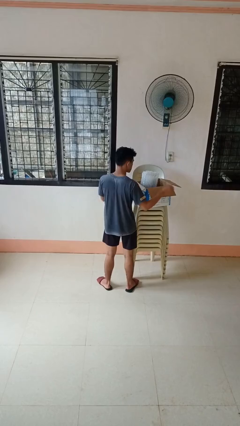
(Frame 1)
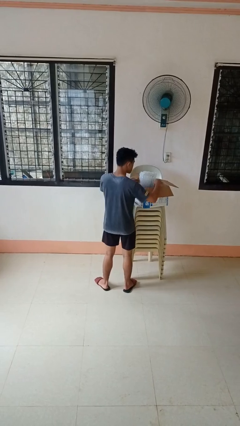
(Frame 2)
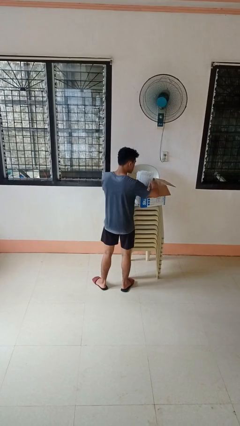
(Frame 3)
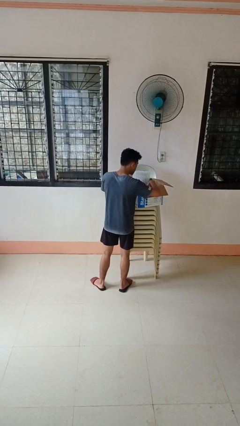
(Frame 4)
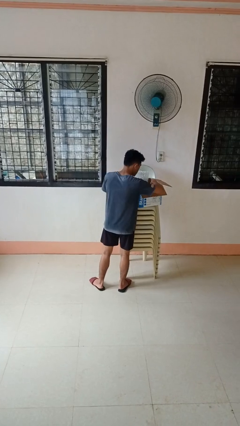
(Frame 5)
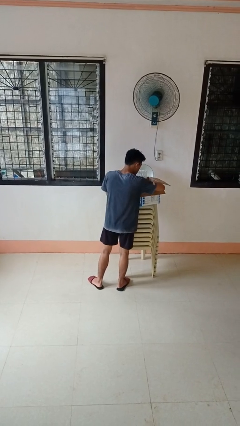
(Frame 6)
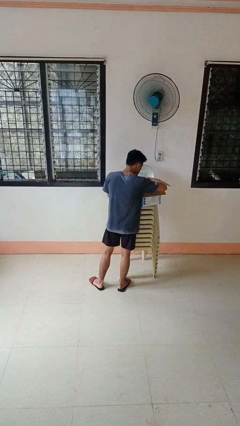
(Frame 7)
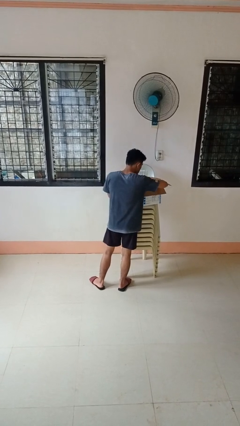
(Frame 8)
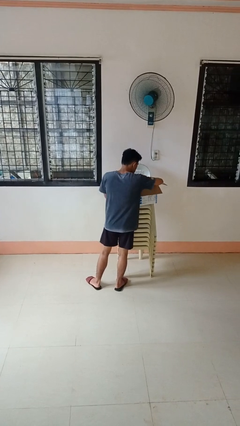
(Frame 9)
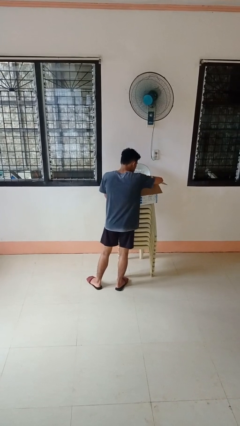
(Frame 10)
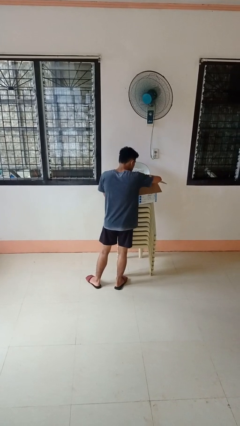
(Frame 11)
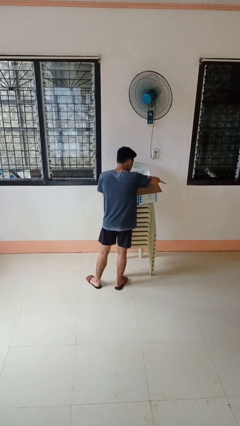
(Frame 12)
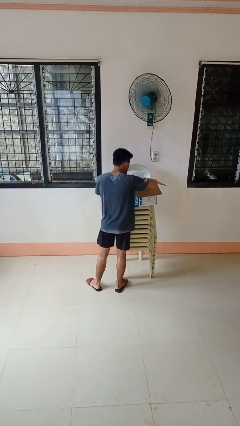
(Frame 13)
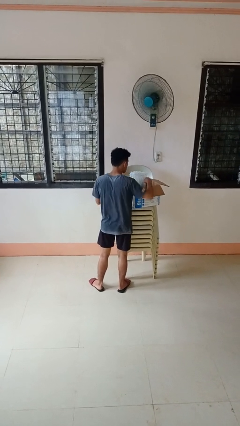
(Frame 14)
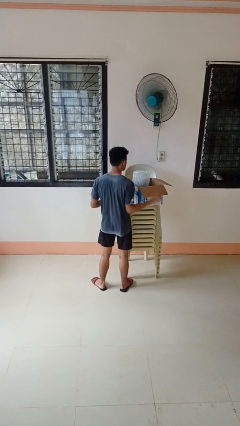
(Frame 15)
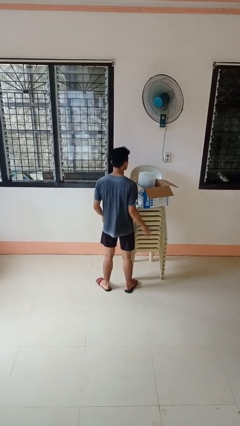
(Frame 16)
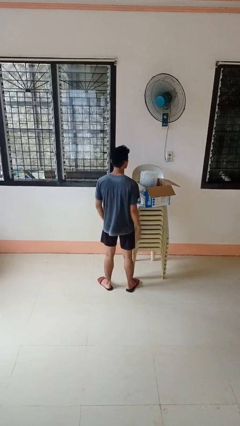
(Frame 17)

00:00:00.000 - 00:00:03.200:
person searches in box

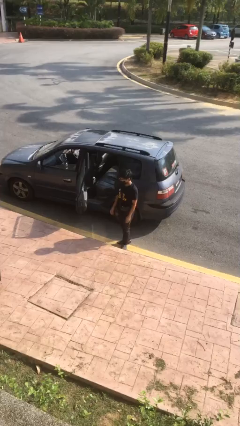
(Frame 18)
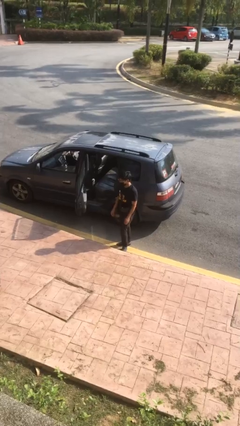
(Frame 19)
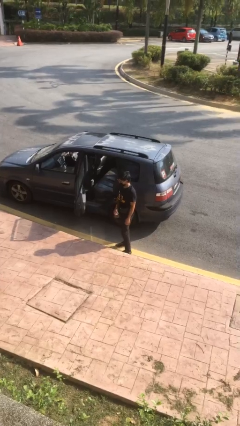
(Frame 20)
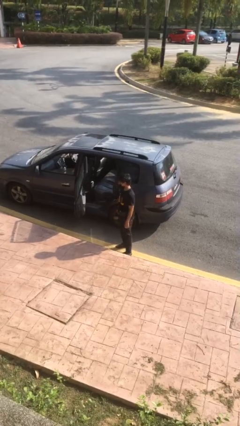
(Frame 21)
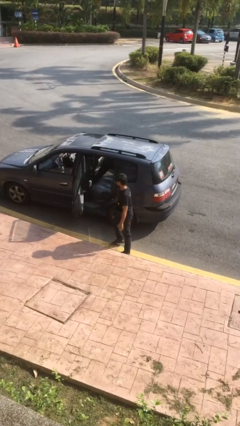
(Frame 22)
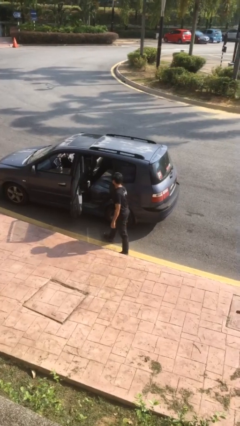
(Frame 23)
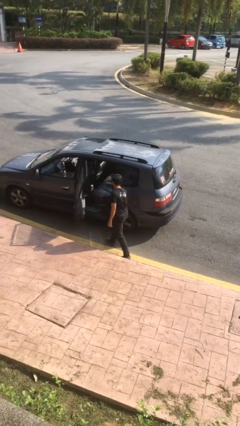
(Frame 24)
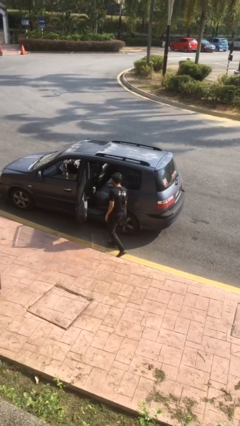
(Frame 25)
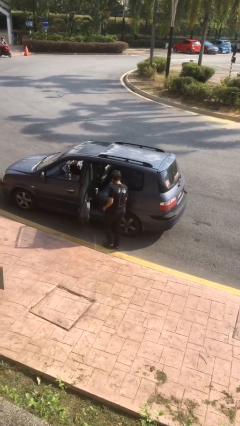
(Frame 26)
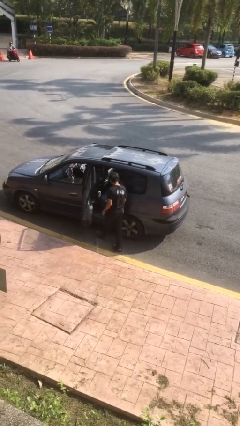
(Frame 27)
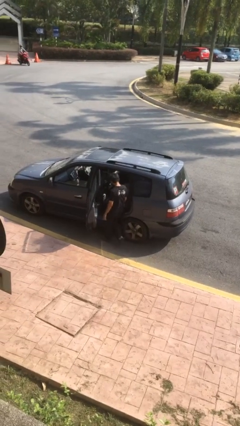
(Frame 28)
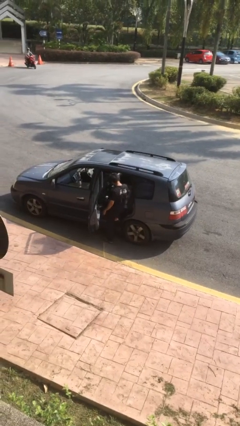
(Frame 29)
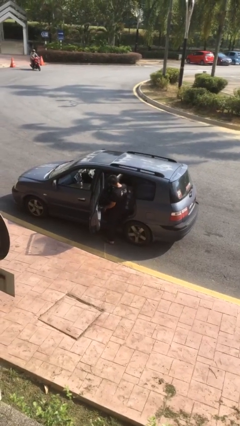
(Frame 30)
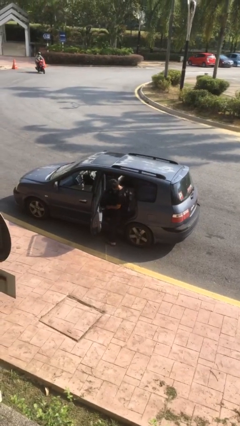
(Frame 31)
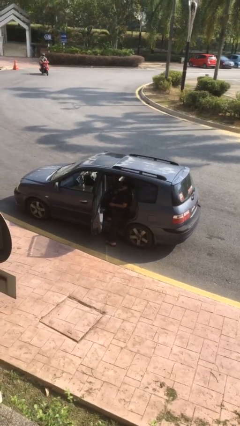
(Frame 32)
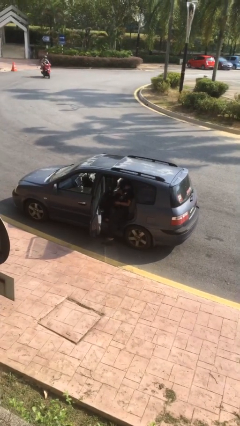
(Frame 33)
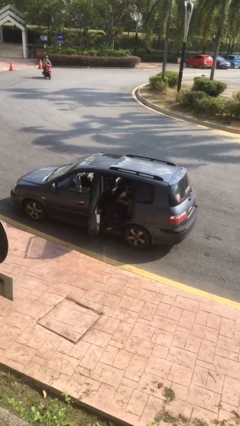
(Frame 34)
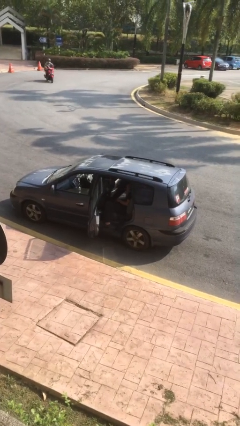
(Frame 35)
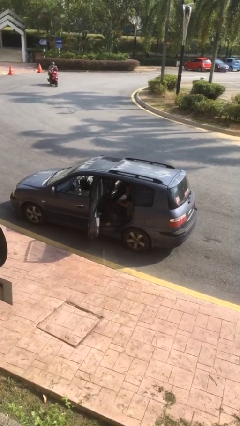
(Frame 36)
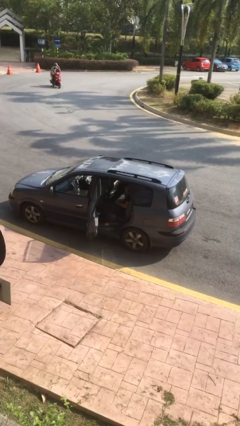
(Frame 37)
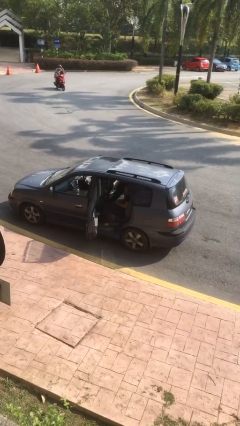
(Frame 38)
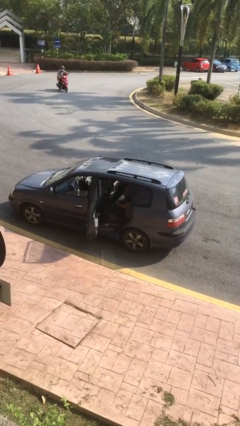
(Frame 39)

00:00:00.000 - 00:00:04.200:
person enters car

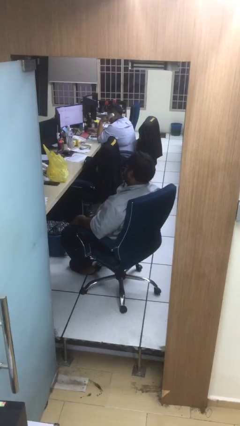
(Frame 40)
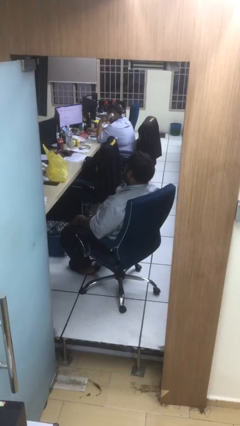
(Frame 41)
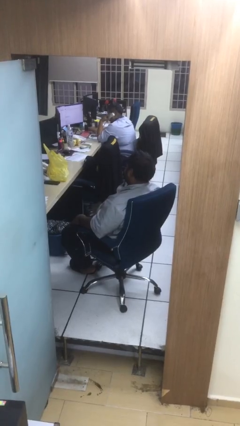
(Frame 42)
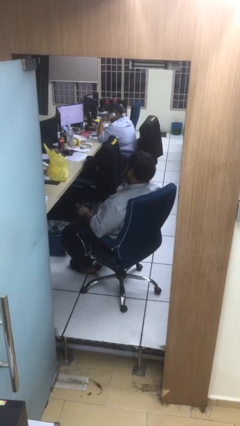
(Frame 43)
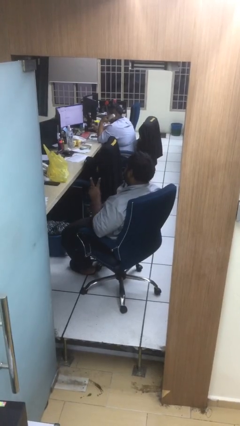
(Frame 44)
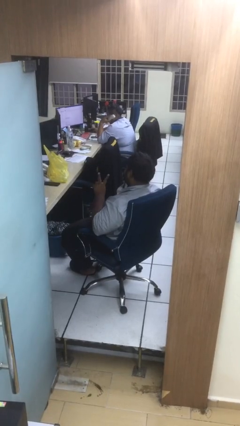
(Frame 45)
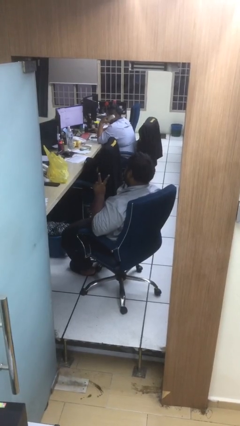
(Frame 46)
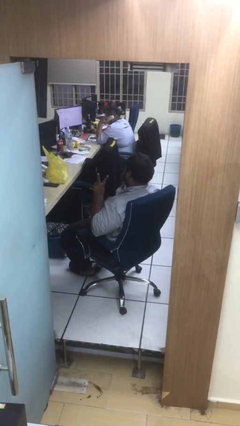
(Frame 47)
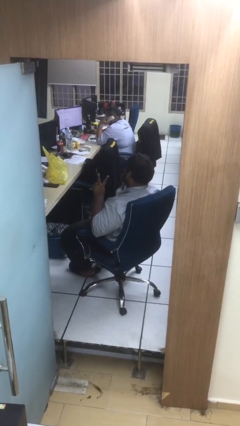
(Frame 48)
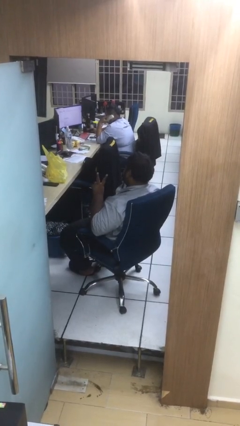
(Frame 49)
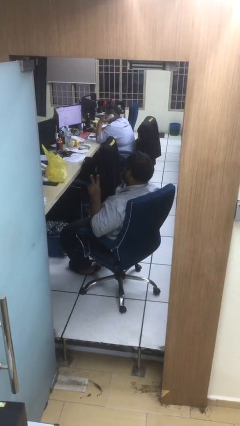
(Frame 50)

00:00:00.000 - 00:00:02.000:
person gestures peace

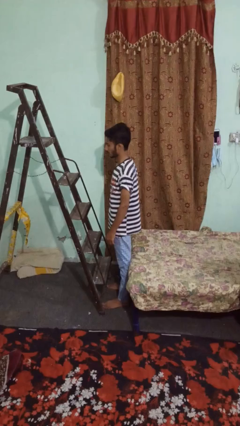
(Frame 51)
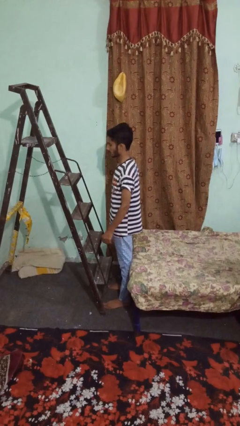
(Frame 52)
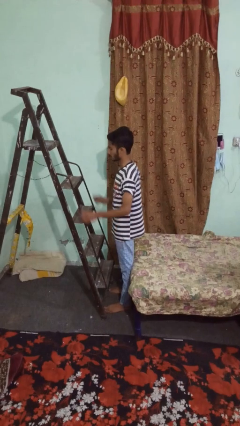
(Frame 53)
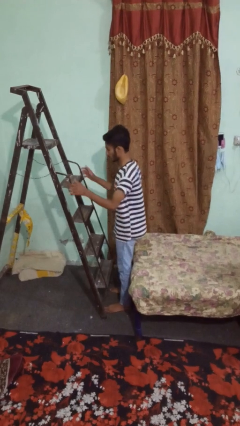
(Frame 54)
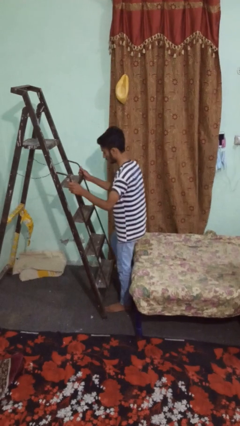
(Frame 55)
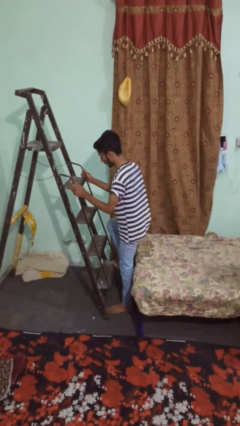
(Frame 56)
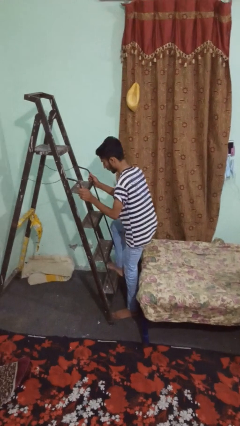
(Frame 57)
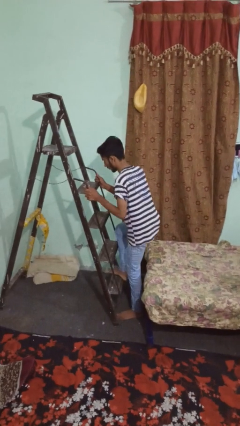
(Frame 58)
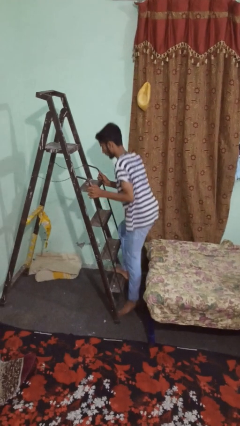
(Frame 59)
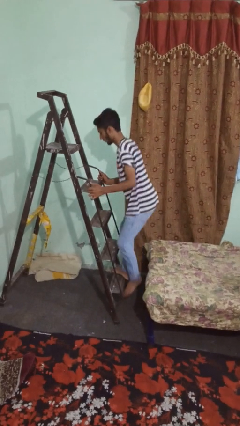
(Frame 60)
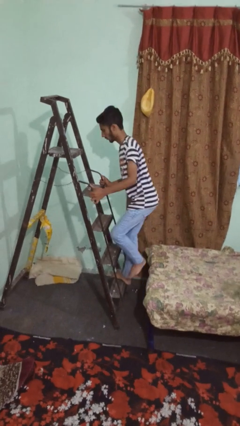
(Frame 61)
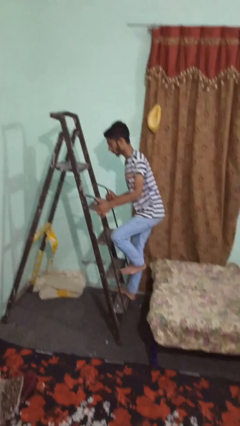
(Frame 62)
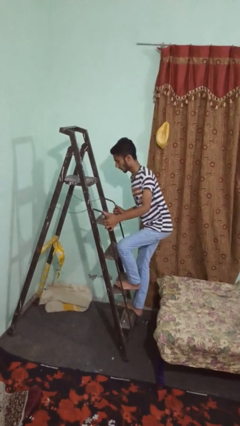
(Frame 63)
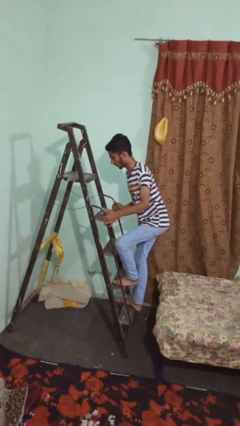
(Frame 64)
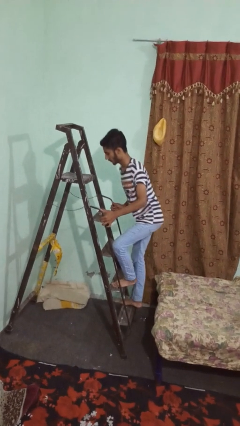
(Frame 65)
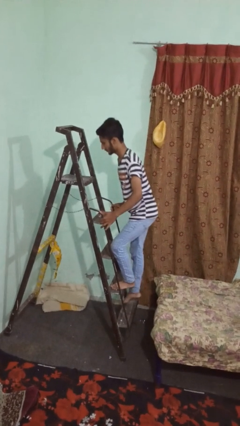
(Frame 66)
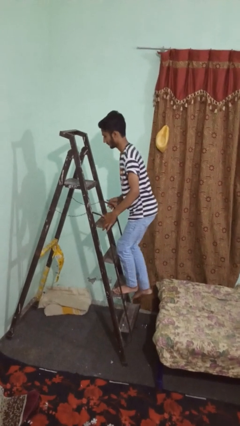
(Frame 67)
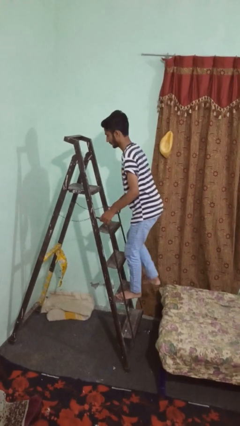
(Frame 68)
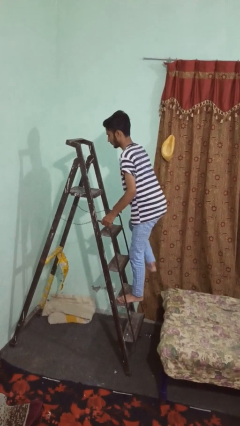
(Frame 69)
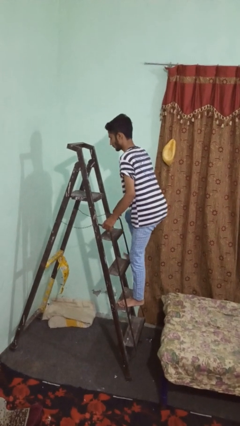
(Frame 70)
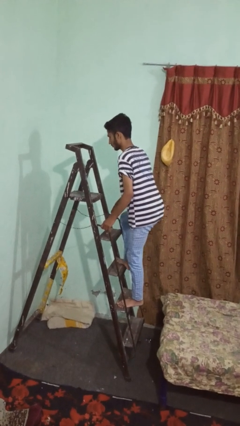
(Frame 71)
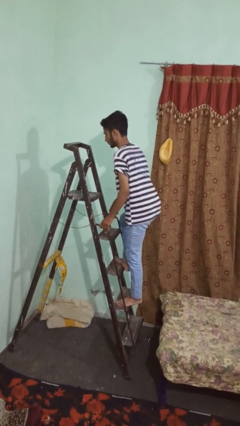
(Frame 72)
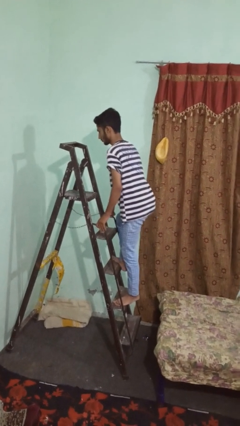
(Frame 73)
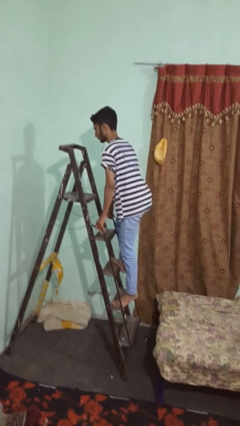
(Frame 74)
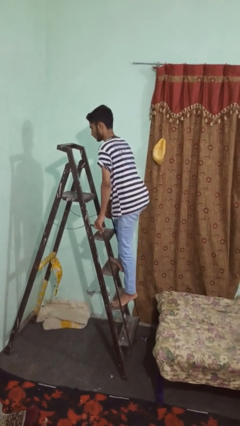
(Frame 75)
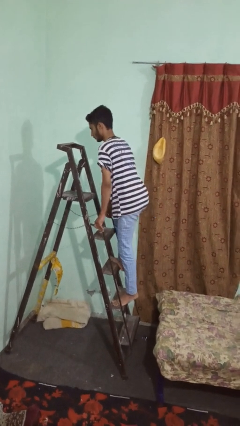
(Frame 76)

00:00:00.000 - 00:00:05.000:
person climbs up ladder

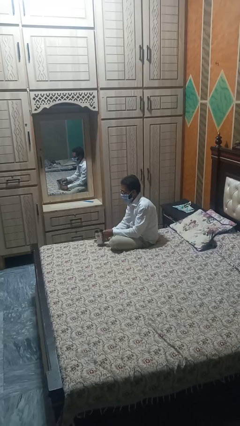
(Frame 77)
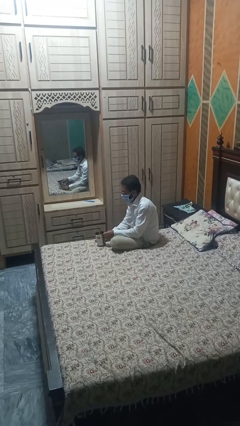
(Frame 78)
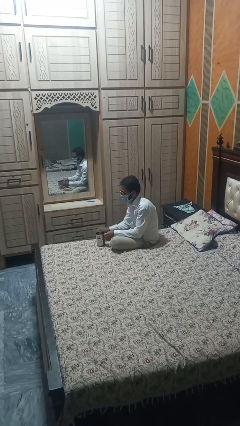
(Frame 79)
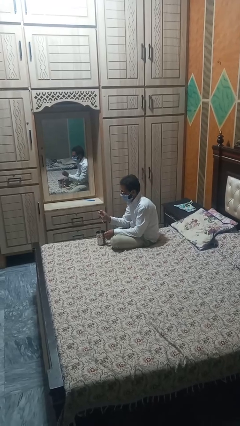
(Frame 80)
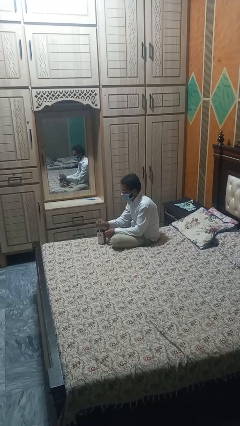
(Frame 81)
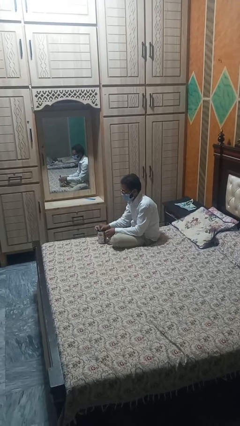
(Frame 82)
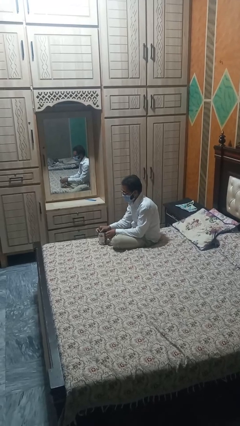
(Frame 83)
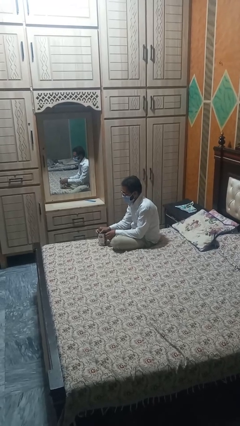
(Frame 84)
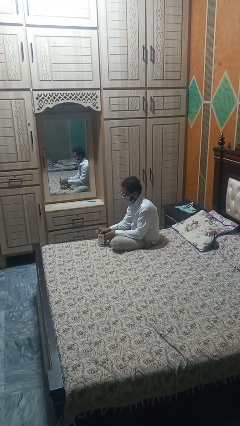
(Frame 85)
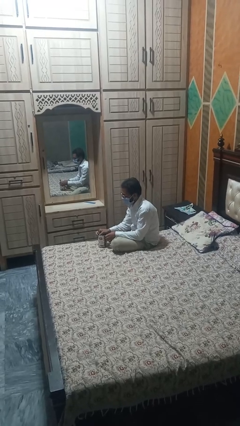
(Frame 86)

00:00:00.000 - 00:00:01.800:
person stirs mug

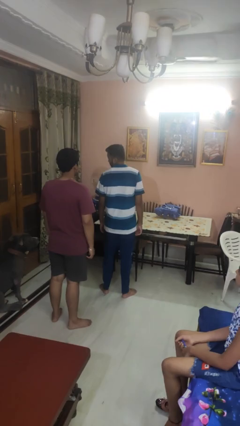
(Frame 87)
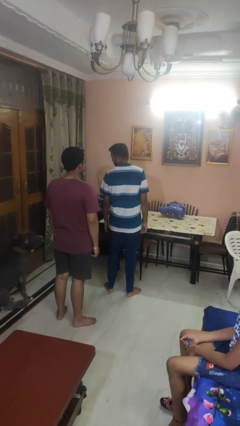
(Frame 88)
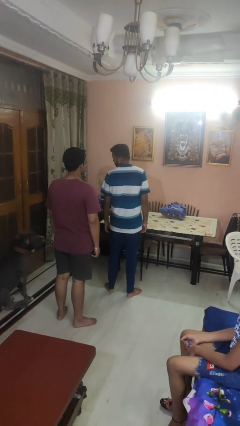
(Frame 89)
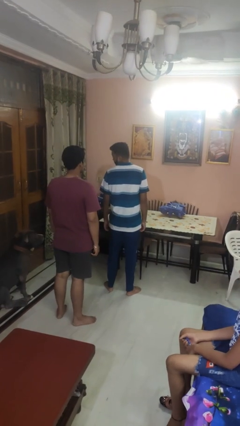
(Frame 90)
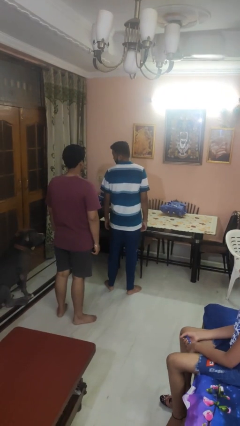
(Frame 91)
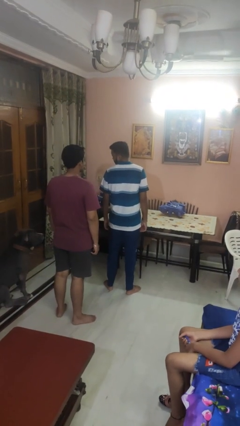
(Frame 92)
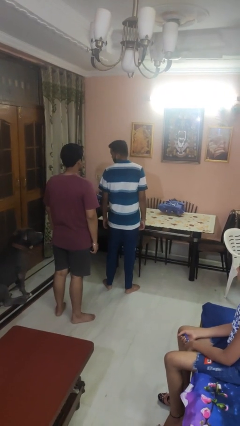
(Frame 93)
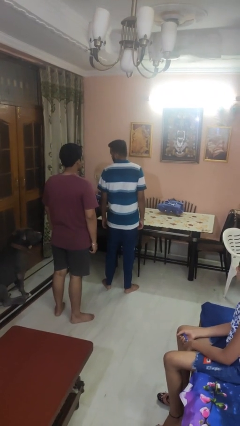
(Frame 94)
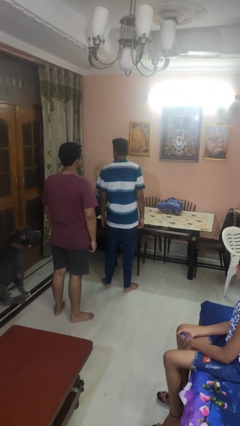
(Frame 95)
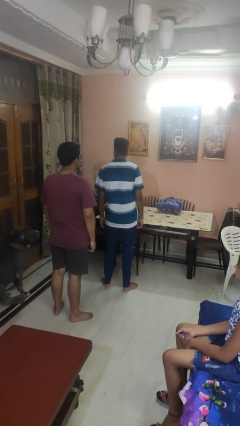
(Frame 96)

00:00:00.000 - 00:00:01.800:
person looks over shoulder
